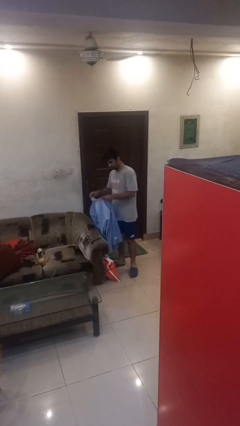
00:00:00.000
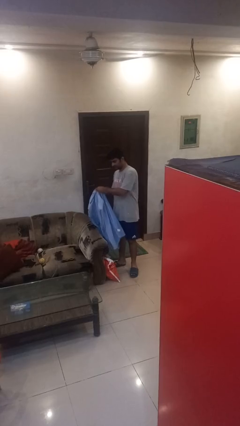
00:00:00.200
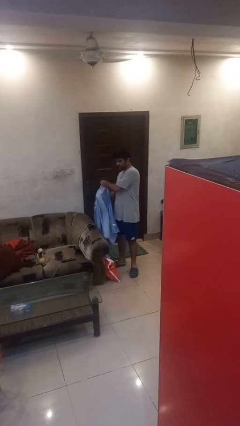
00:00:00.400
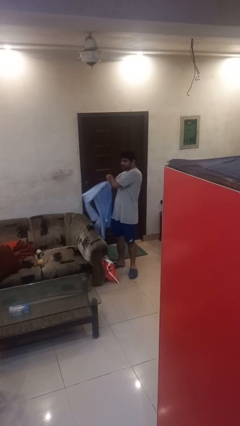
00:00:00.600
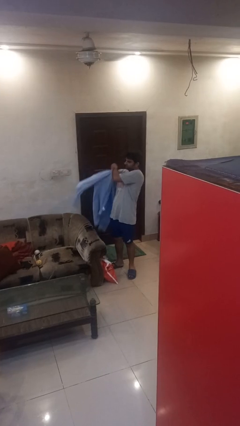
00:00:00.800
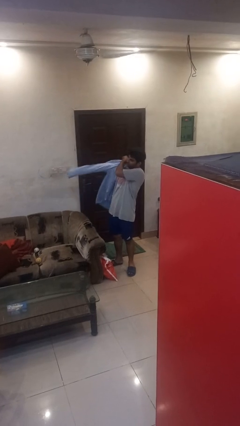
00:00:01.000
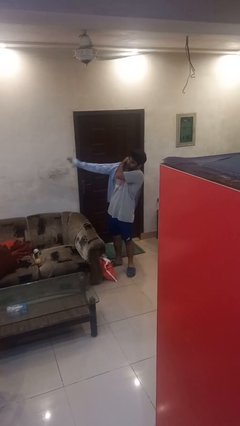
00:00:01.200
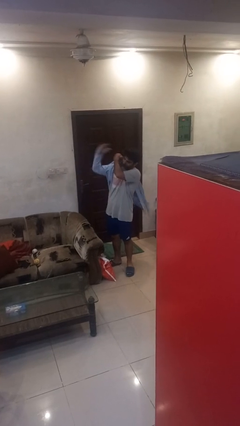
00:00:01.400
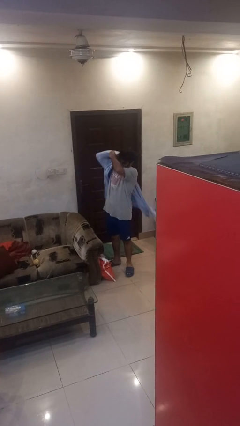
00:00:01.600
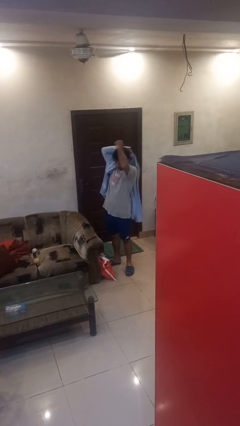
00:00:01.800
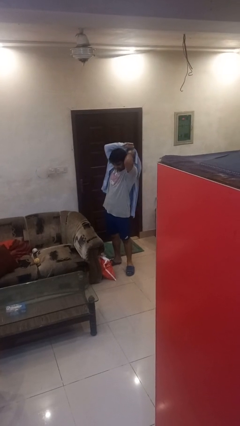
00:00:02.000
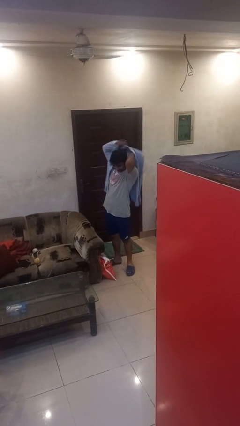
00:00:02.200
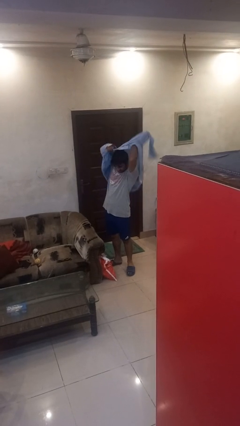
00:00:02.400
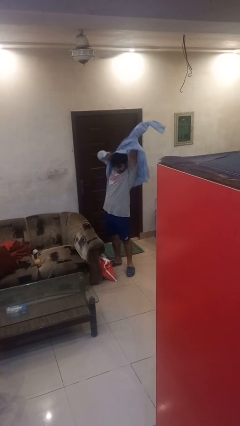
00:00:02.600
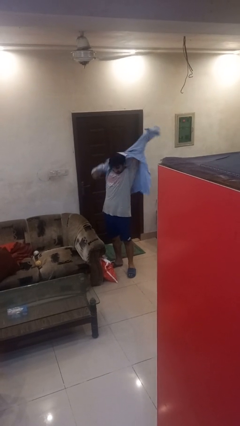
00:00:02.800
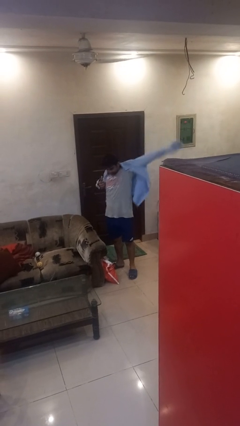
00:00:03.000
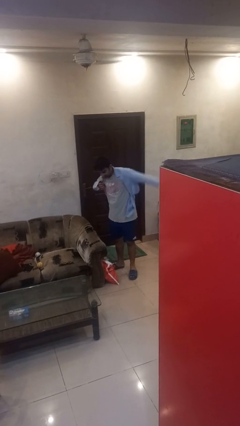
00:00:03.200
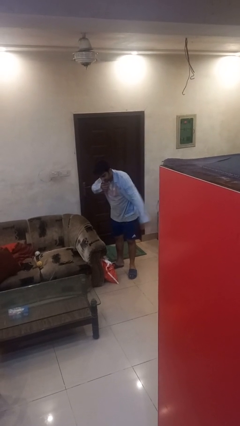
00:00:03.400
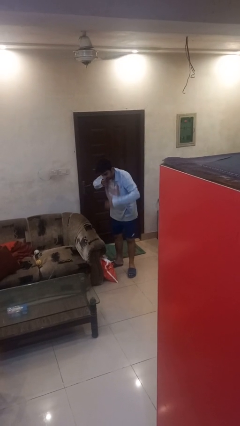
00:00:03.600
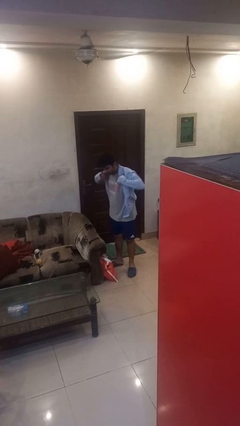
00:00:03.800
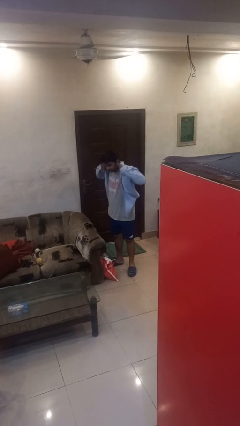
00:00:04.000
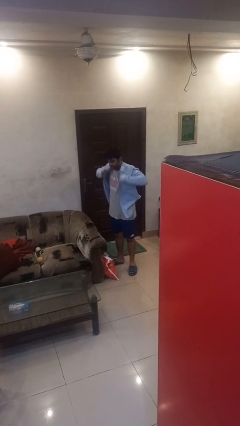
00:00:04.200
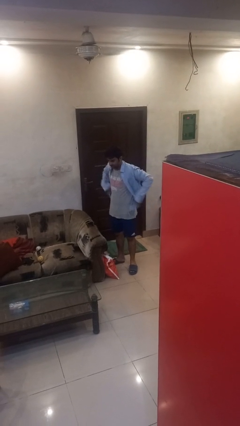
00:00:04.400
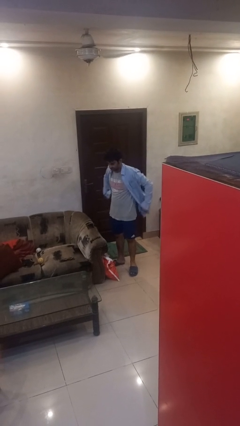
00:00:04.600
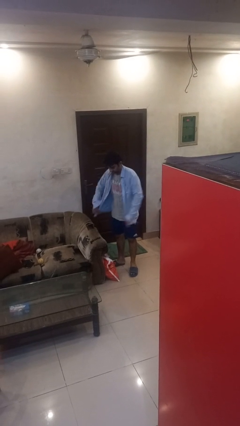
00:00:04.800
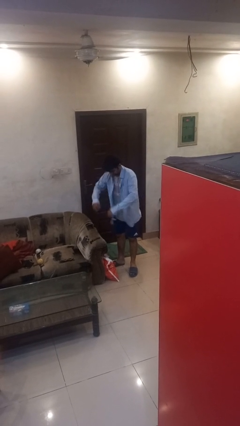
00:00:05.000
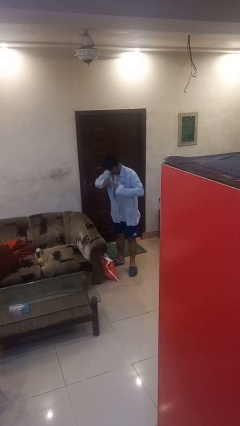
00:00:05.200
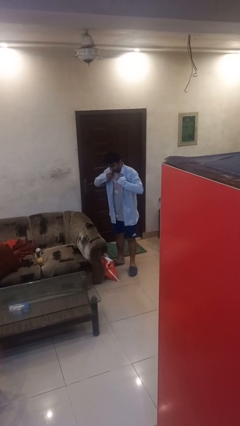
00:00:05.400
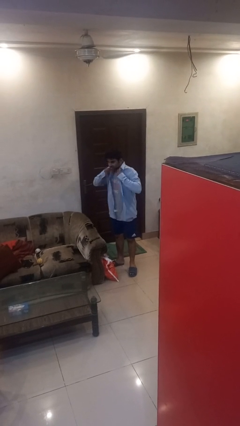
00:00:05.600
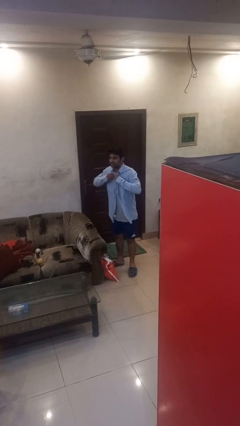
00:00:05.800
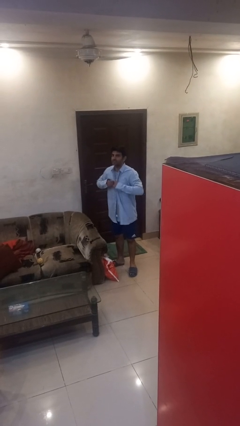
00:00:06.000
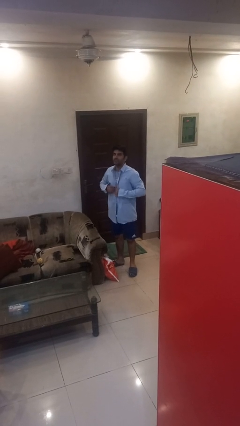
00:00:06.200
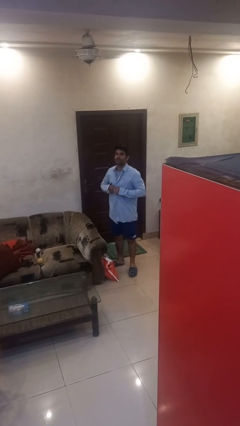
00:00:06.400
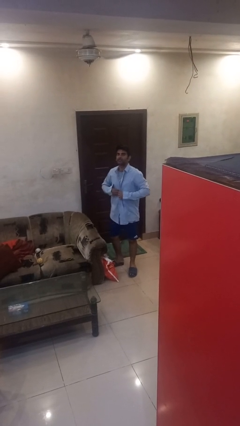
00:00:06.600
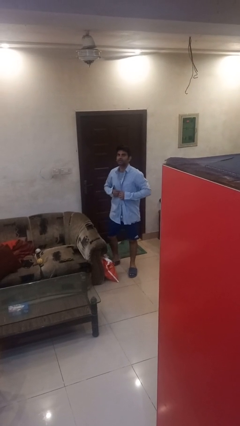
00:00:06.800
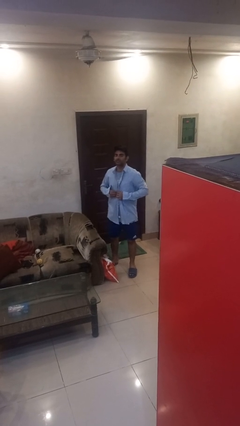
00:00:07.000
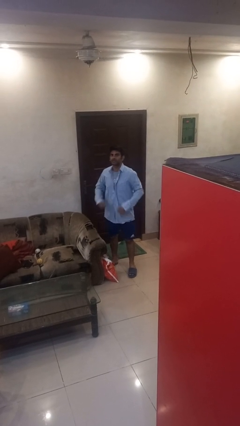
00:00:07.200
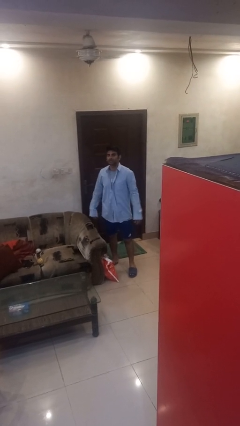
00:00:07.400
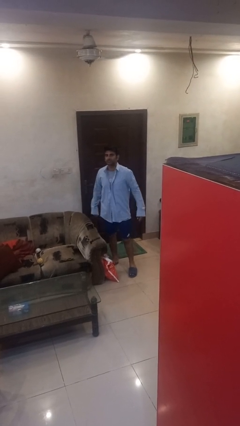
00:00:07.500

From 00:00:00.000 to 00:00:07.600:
person puts on shirt

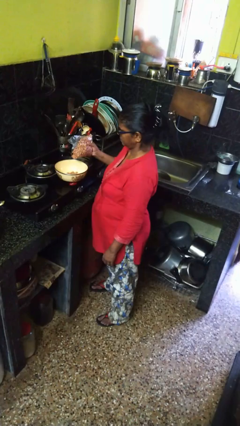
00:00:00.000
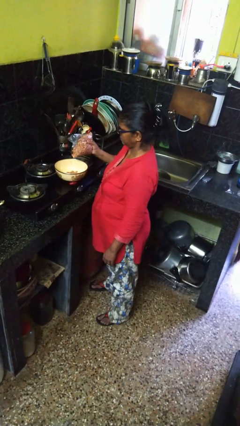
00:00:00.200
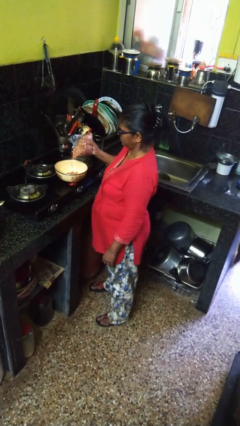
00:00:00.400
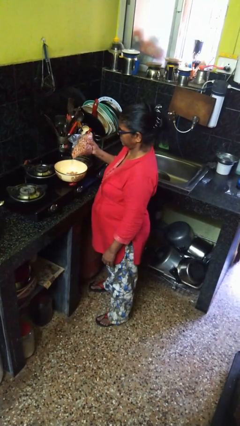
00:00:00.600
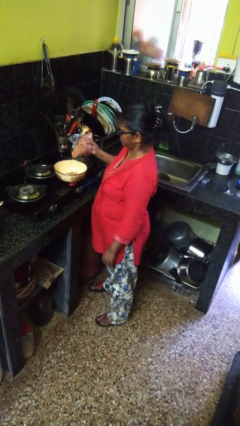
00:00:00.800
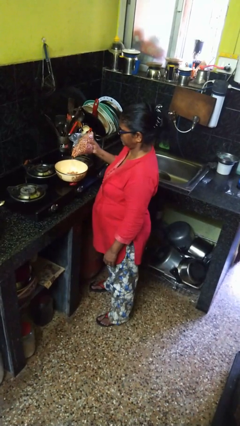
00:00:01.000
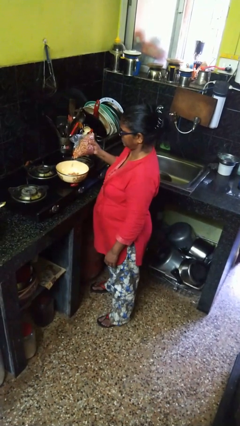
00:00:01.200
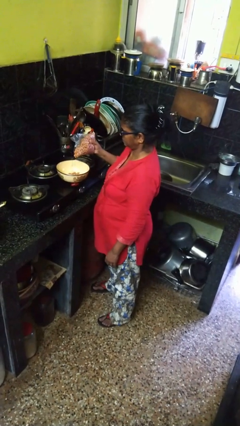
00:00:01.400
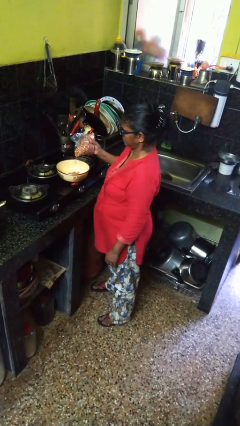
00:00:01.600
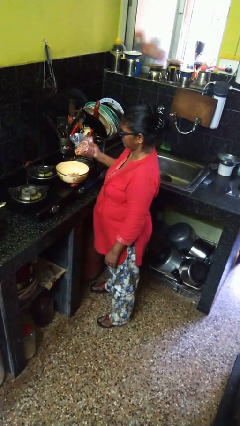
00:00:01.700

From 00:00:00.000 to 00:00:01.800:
person pours into bowl

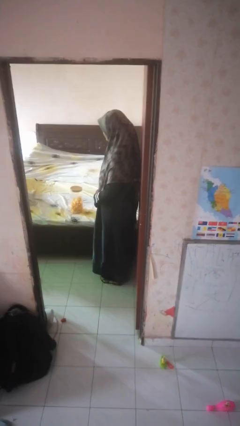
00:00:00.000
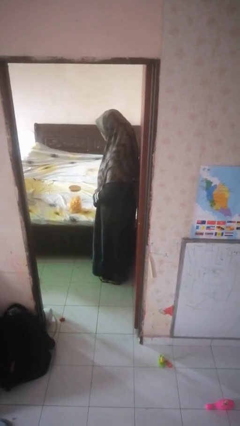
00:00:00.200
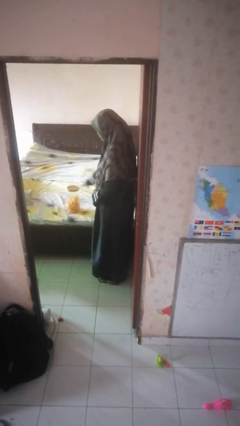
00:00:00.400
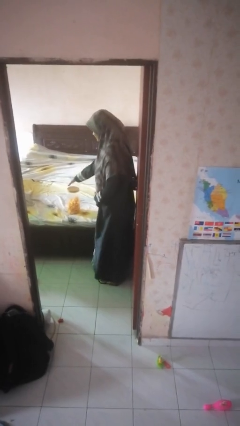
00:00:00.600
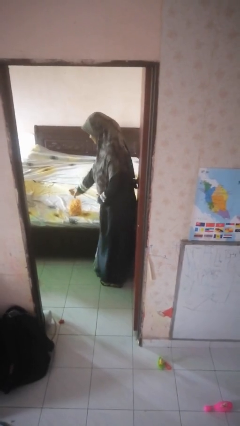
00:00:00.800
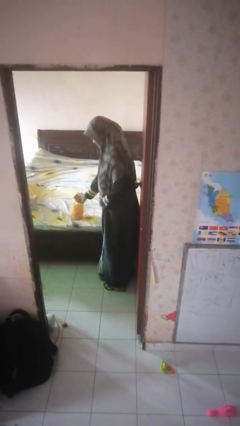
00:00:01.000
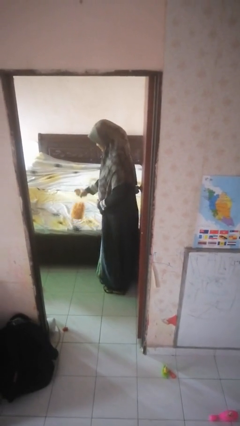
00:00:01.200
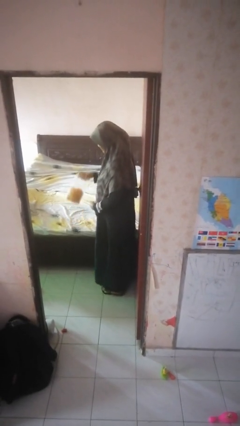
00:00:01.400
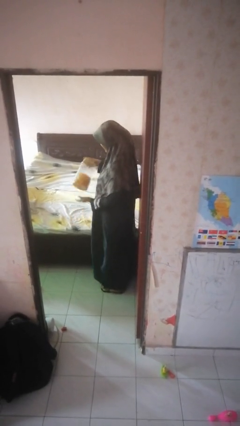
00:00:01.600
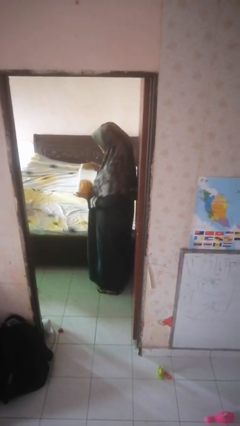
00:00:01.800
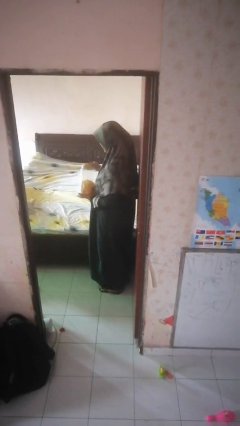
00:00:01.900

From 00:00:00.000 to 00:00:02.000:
person picks up object from bed

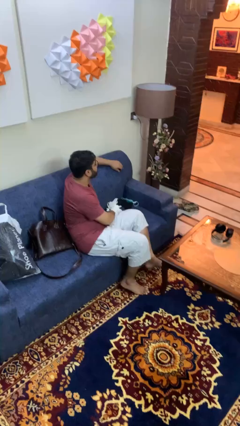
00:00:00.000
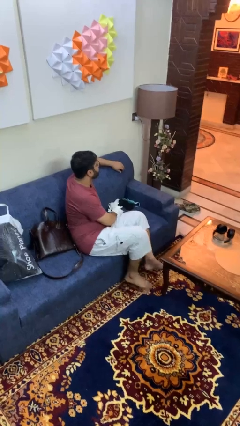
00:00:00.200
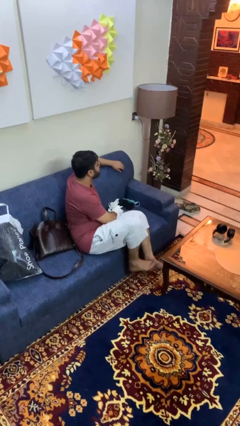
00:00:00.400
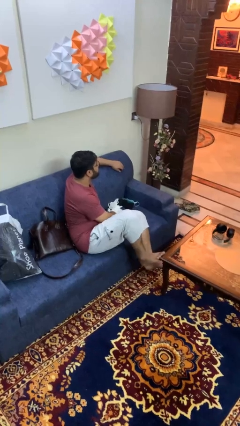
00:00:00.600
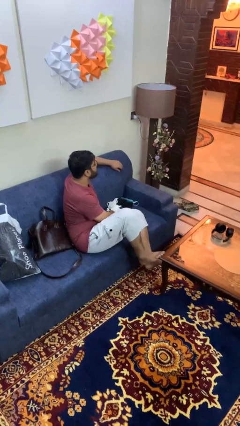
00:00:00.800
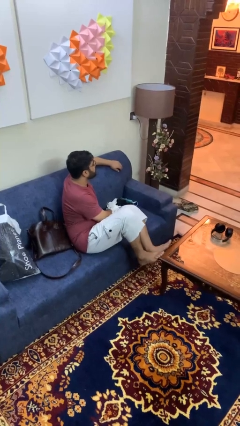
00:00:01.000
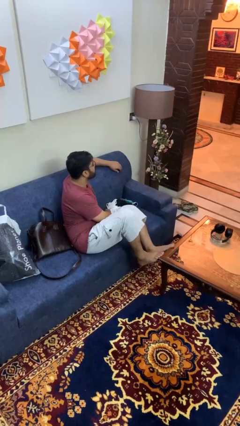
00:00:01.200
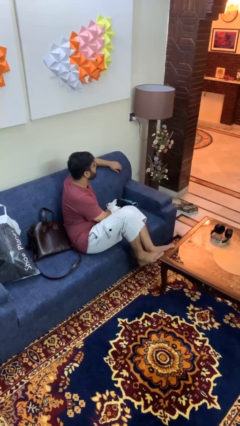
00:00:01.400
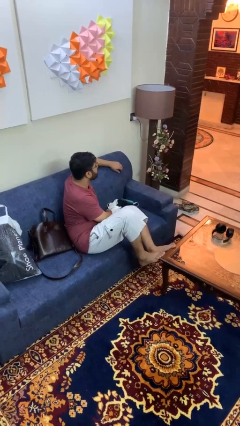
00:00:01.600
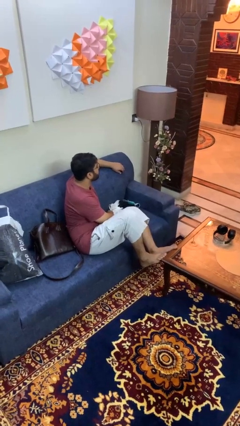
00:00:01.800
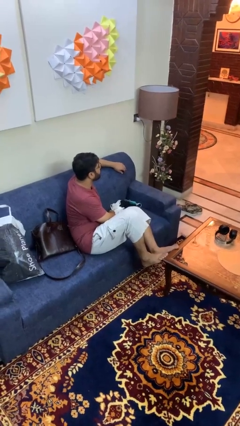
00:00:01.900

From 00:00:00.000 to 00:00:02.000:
person puts feet up

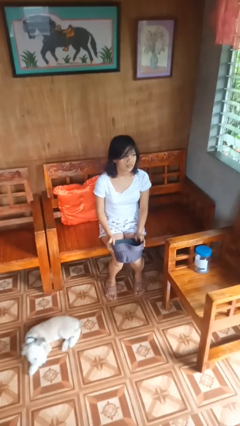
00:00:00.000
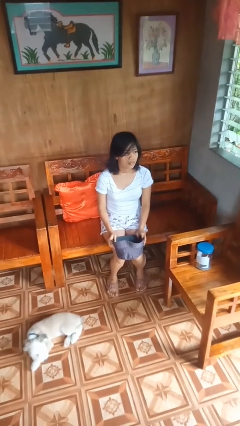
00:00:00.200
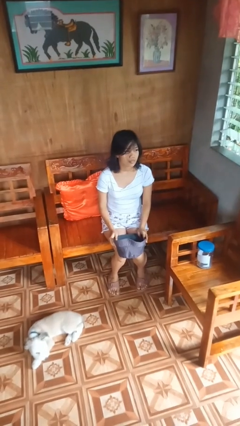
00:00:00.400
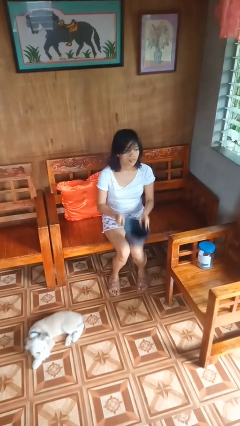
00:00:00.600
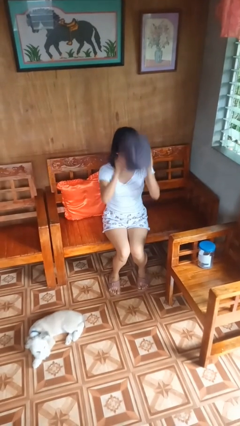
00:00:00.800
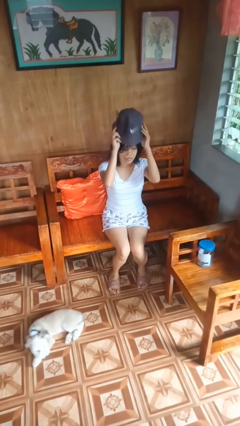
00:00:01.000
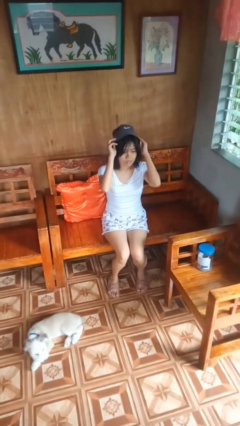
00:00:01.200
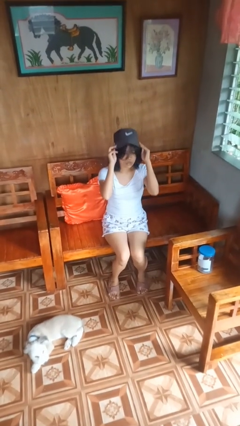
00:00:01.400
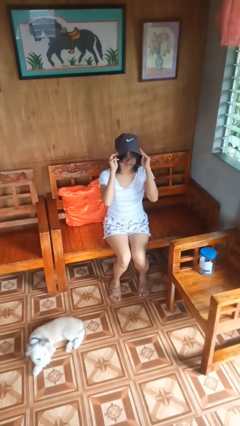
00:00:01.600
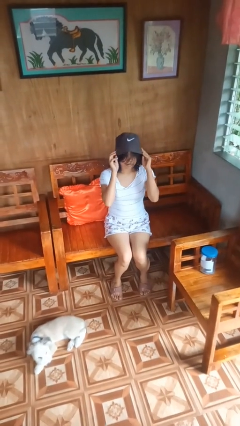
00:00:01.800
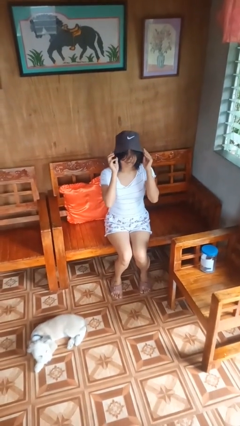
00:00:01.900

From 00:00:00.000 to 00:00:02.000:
person puts on hat

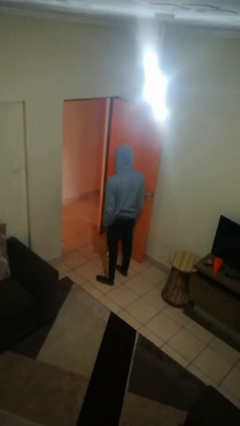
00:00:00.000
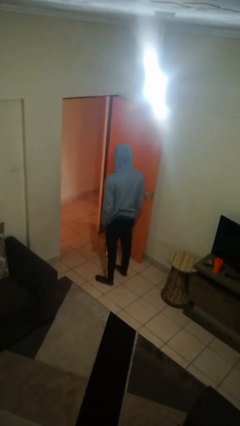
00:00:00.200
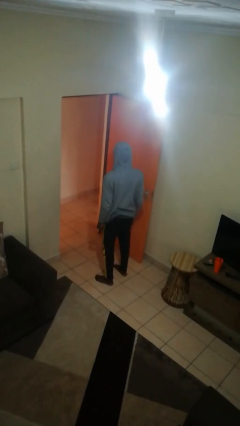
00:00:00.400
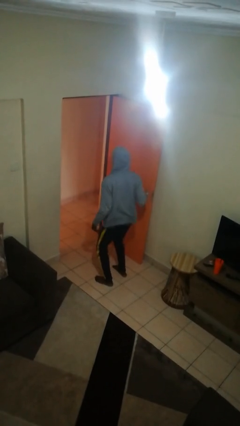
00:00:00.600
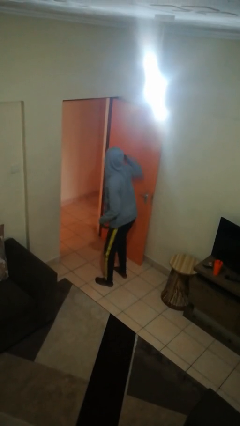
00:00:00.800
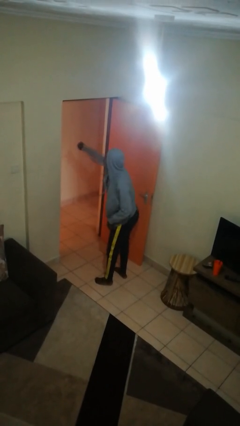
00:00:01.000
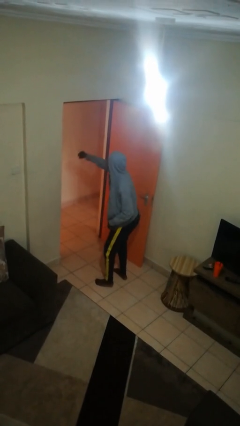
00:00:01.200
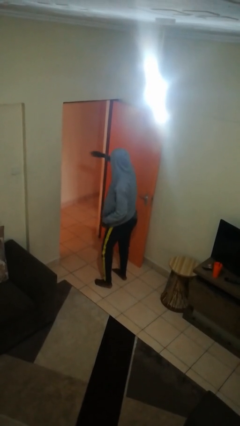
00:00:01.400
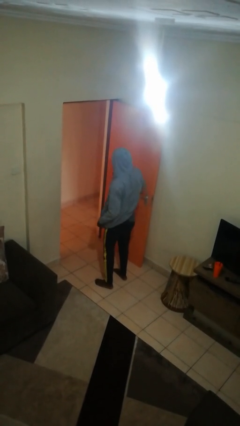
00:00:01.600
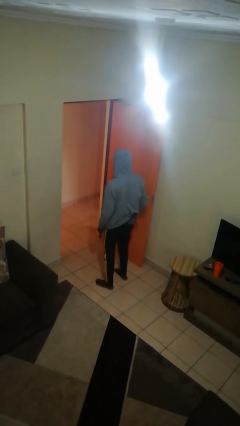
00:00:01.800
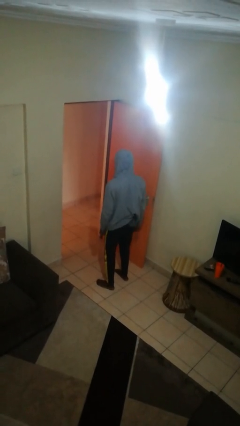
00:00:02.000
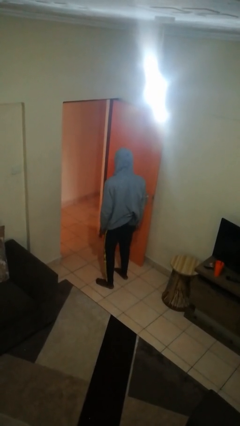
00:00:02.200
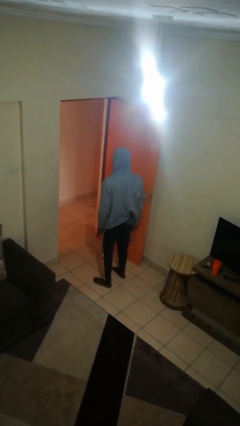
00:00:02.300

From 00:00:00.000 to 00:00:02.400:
person punches
